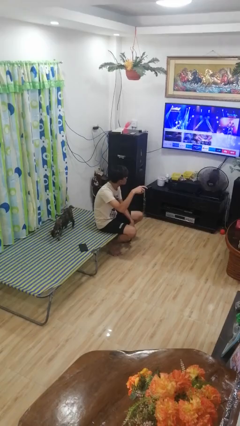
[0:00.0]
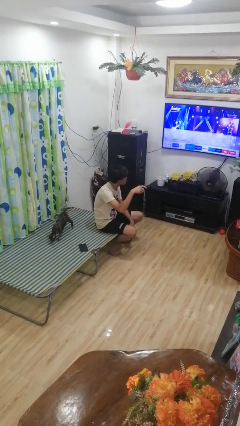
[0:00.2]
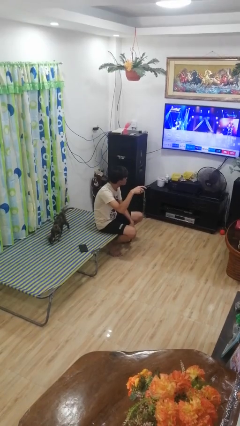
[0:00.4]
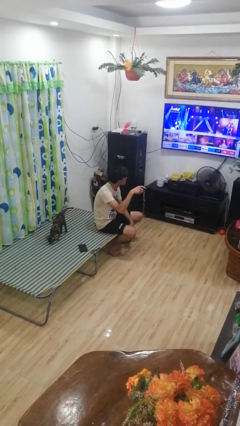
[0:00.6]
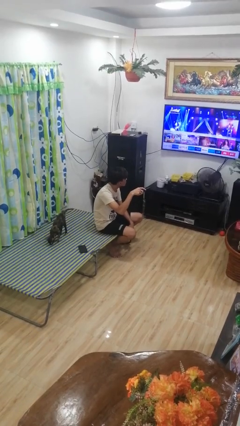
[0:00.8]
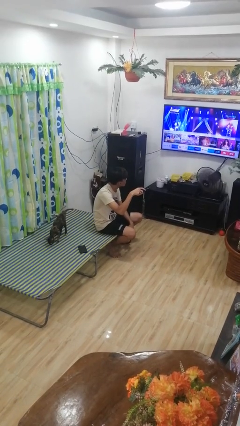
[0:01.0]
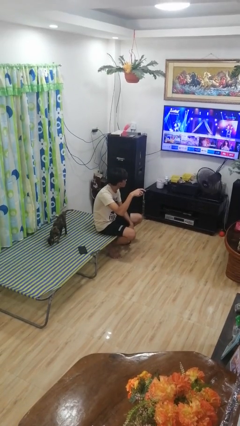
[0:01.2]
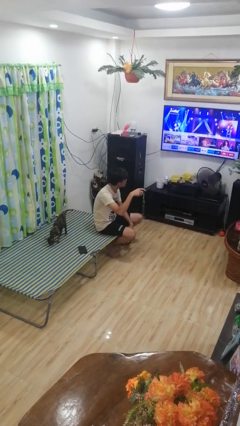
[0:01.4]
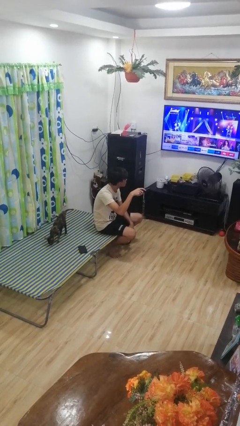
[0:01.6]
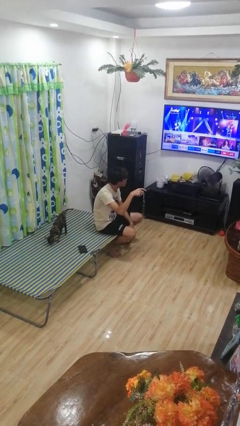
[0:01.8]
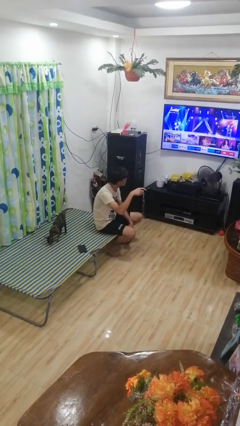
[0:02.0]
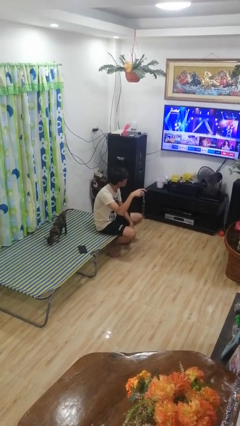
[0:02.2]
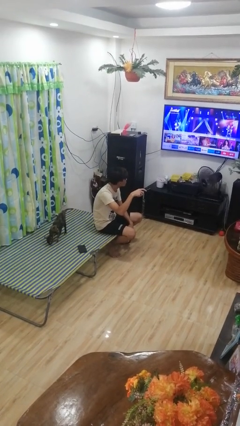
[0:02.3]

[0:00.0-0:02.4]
person uses television remote

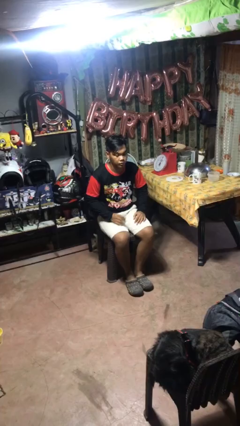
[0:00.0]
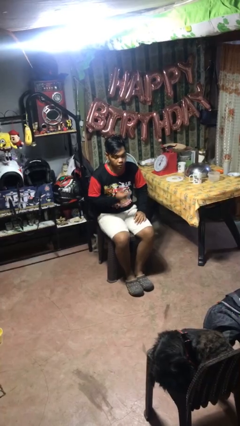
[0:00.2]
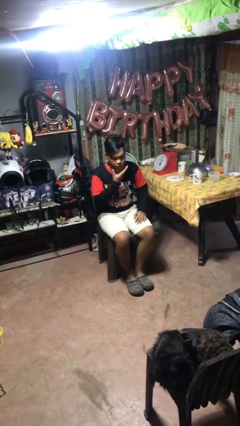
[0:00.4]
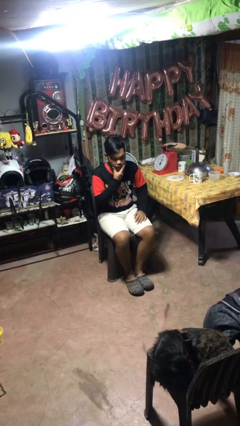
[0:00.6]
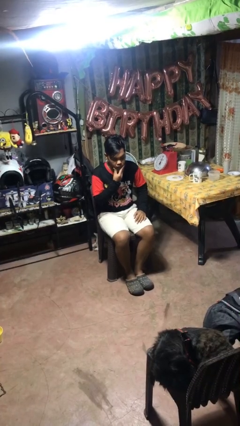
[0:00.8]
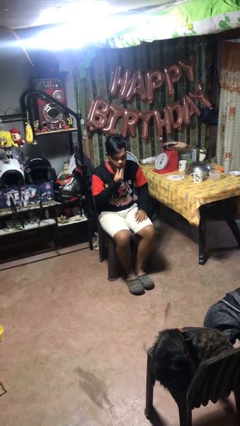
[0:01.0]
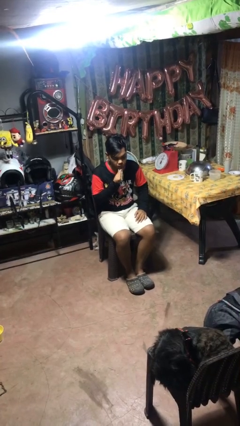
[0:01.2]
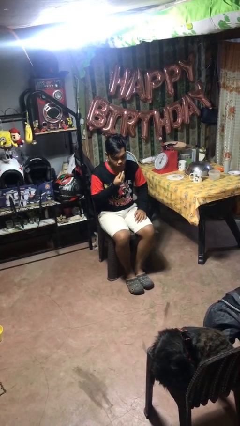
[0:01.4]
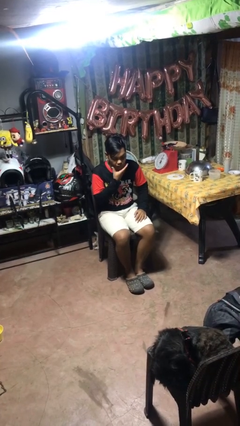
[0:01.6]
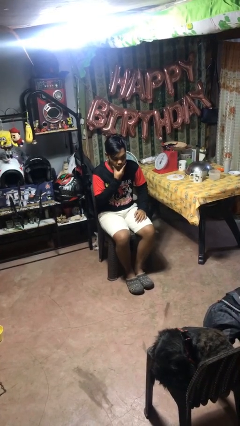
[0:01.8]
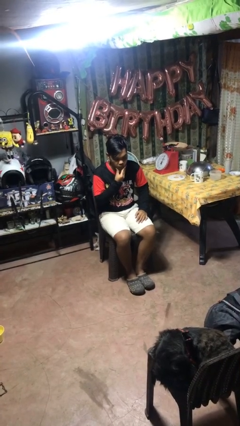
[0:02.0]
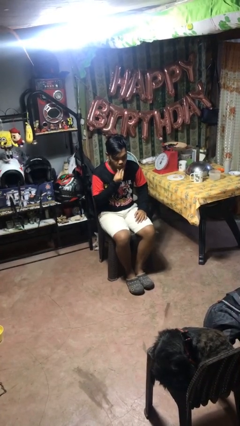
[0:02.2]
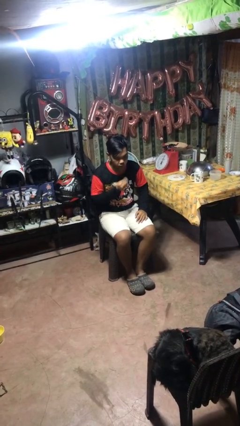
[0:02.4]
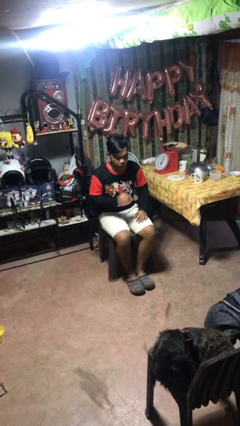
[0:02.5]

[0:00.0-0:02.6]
person strokes chin

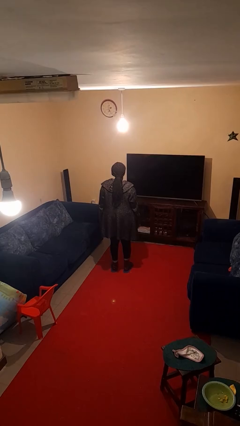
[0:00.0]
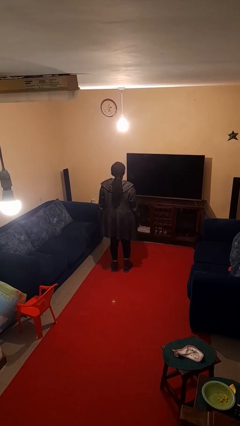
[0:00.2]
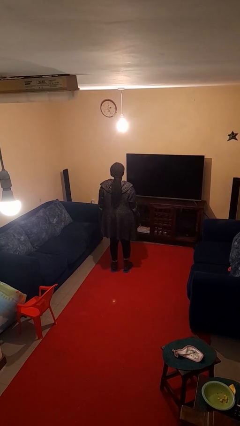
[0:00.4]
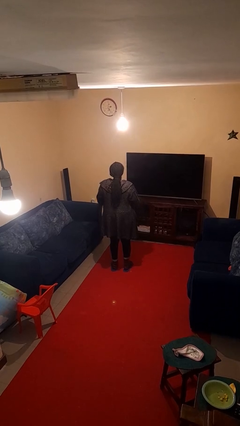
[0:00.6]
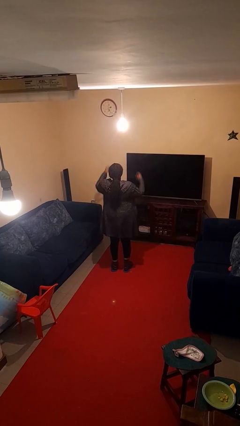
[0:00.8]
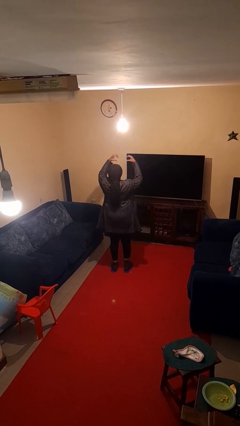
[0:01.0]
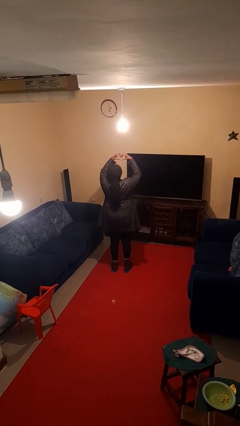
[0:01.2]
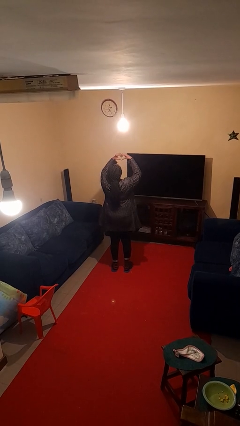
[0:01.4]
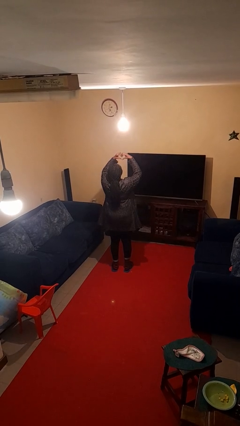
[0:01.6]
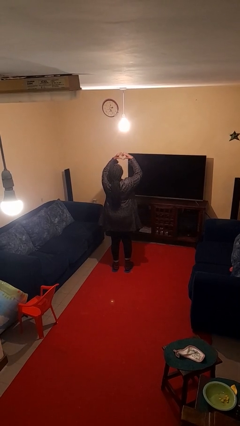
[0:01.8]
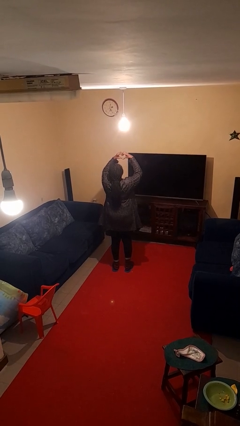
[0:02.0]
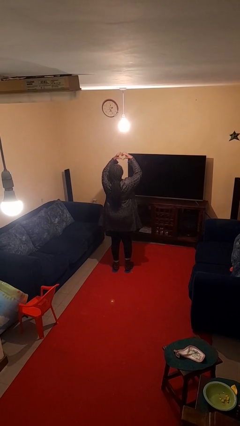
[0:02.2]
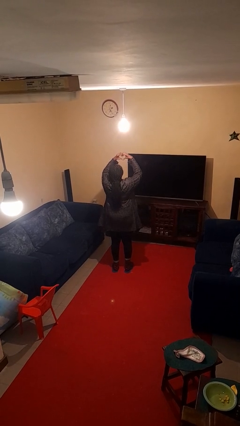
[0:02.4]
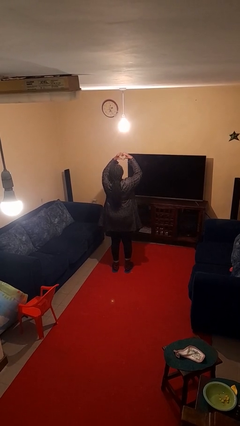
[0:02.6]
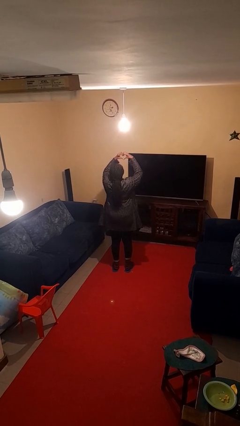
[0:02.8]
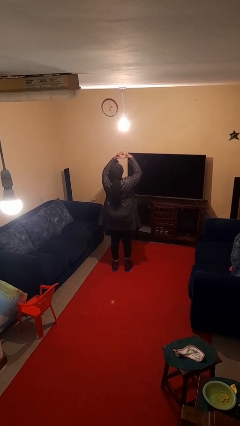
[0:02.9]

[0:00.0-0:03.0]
person gestures heart

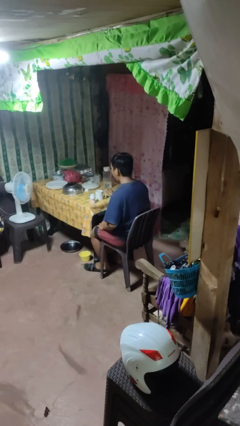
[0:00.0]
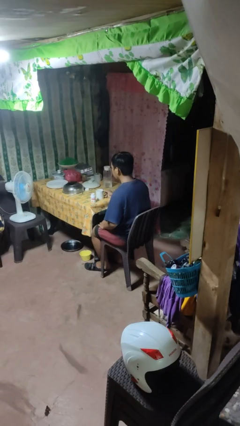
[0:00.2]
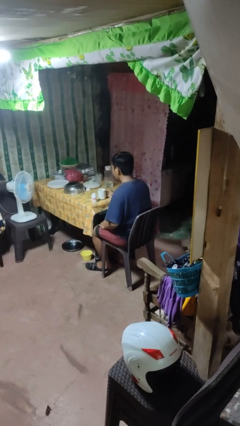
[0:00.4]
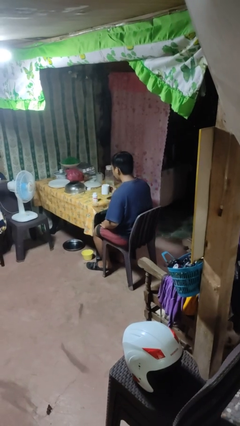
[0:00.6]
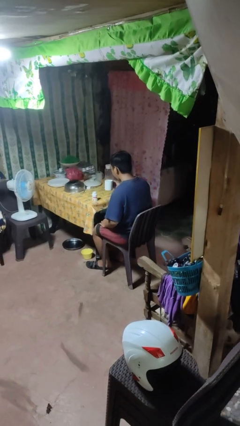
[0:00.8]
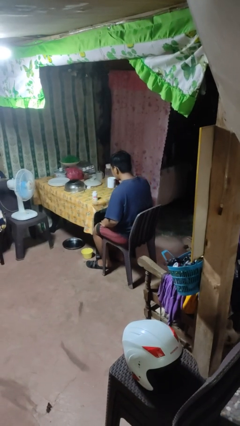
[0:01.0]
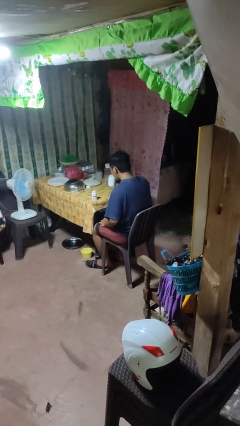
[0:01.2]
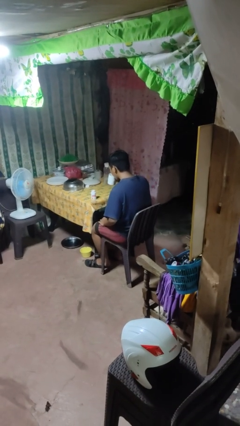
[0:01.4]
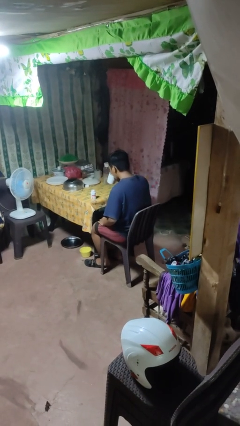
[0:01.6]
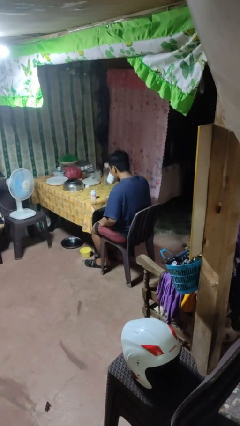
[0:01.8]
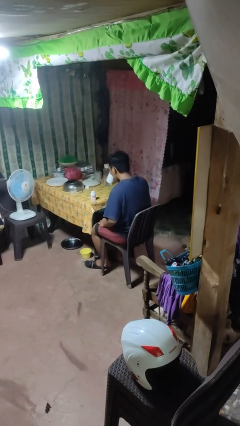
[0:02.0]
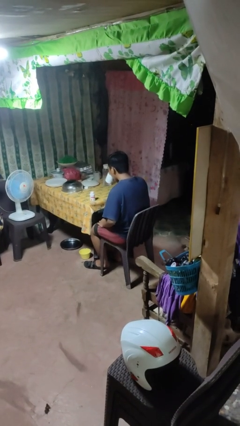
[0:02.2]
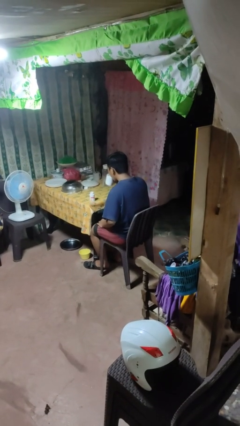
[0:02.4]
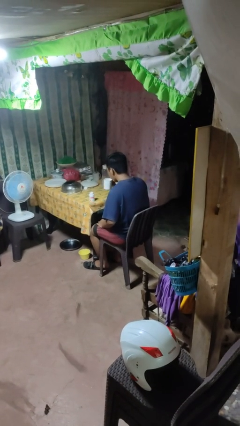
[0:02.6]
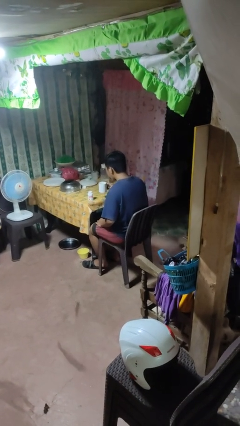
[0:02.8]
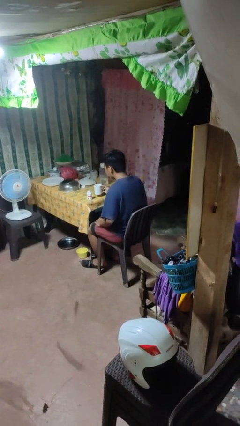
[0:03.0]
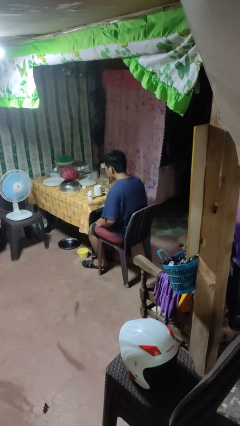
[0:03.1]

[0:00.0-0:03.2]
person drinks from cup

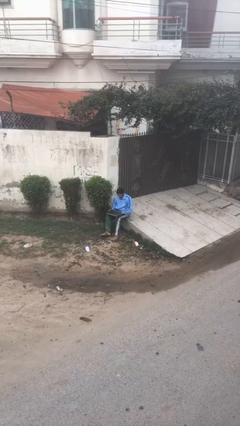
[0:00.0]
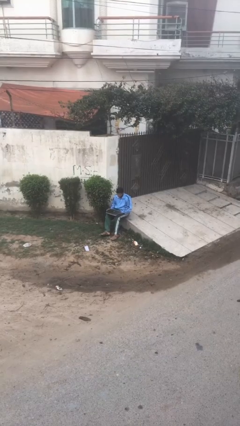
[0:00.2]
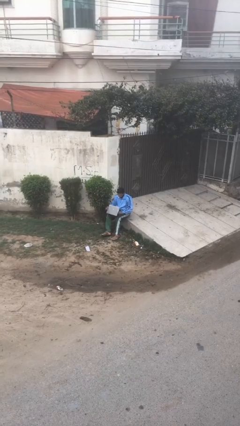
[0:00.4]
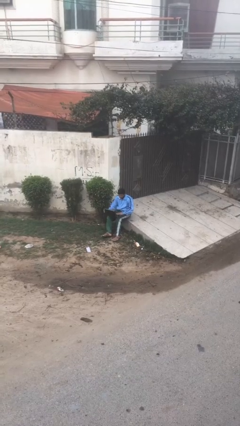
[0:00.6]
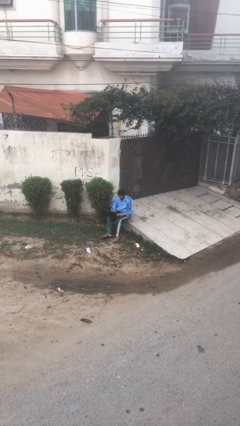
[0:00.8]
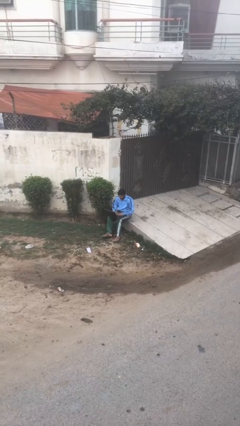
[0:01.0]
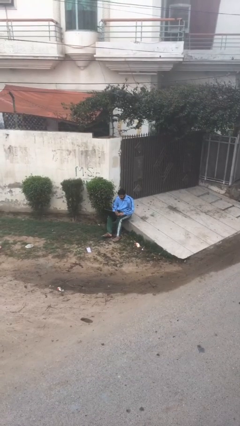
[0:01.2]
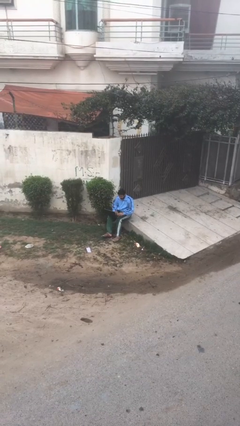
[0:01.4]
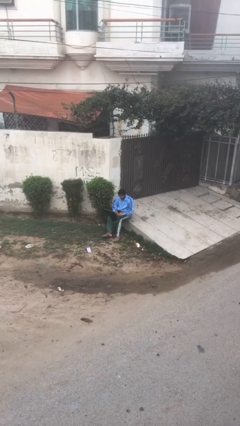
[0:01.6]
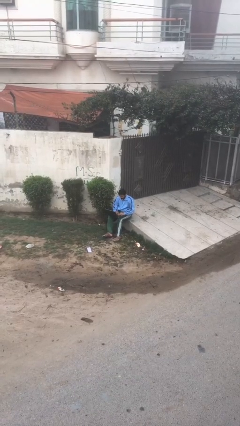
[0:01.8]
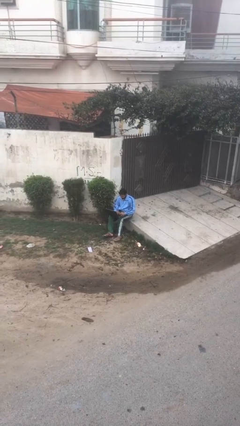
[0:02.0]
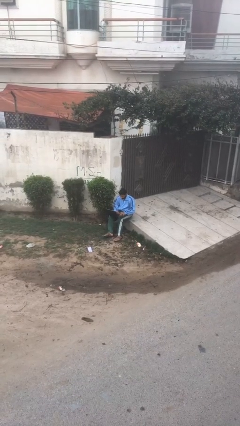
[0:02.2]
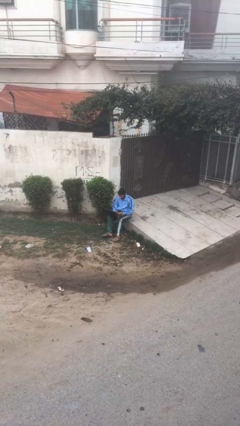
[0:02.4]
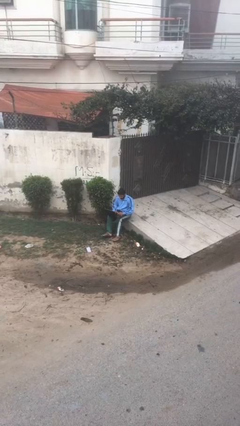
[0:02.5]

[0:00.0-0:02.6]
person interacts with laptop

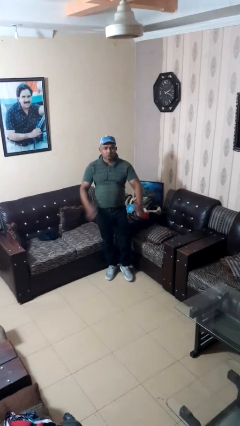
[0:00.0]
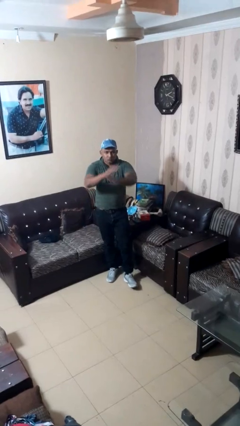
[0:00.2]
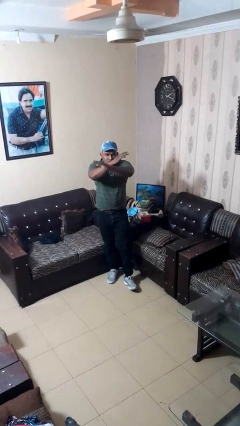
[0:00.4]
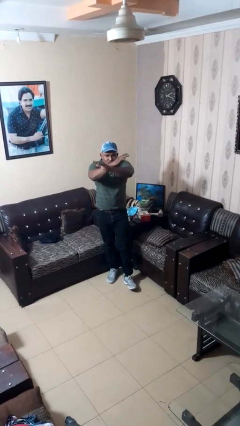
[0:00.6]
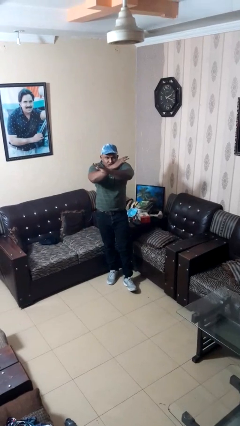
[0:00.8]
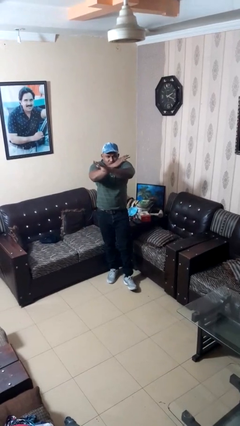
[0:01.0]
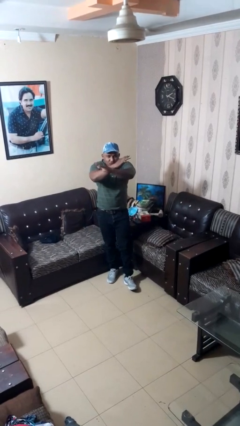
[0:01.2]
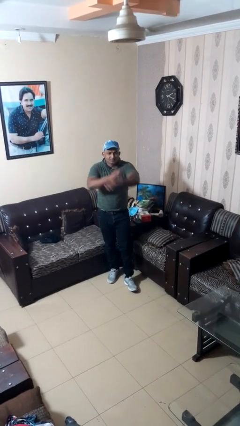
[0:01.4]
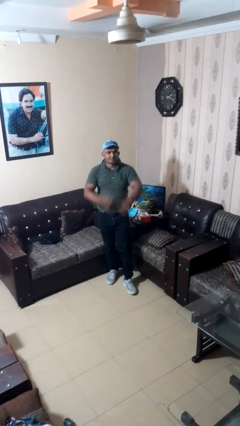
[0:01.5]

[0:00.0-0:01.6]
person gestures arms x

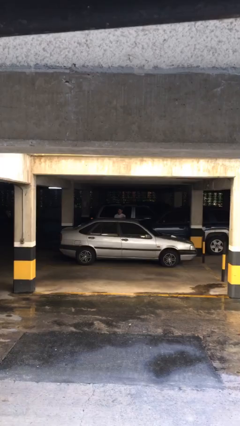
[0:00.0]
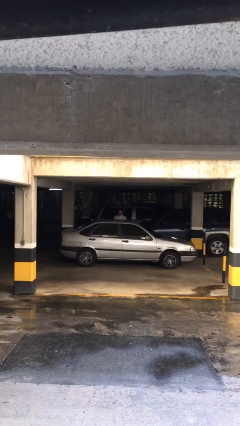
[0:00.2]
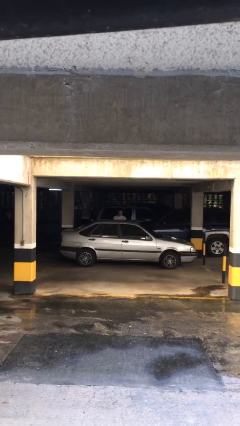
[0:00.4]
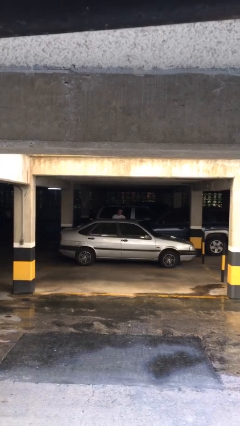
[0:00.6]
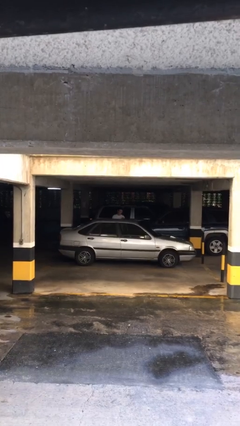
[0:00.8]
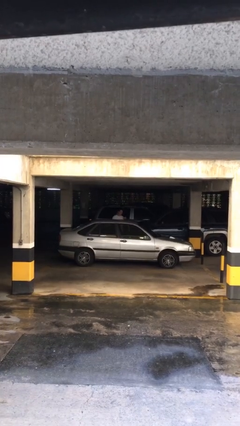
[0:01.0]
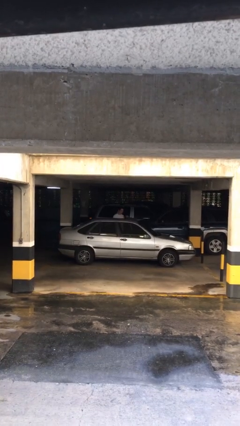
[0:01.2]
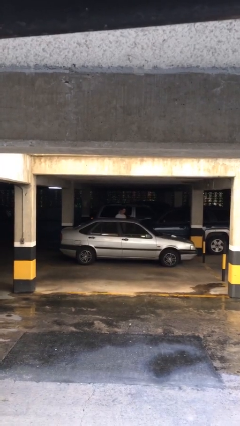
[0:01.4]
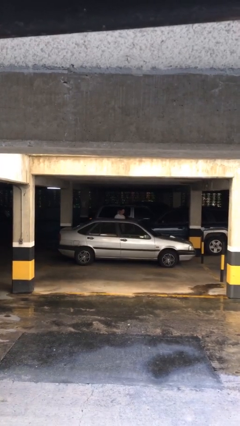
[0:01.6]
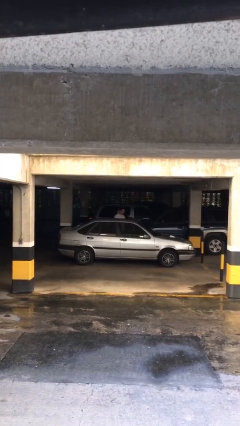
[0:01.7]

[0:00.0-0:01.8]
person opens car door
